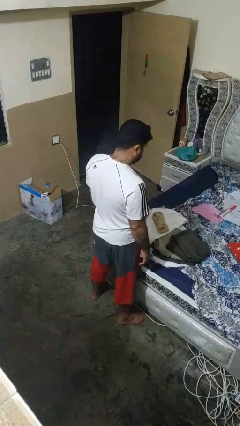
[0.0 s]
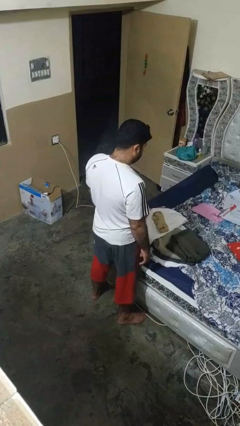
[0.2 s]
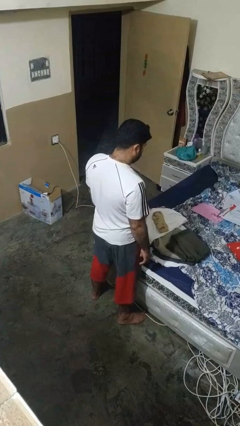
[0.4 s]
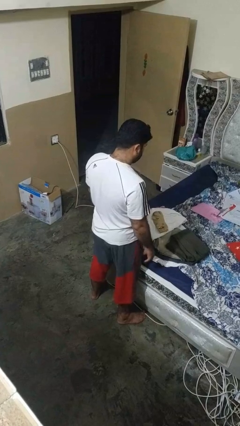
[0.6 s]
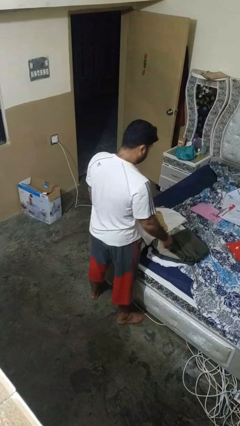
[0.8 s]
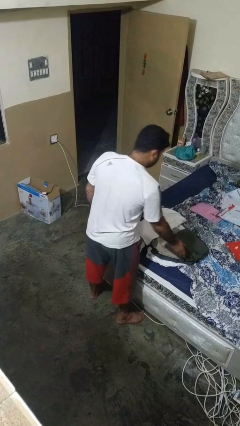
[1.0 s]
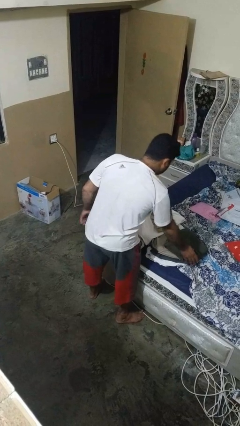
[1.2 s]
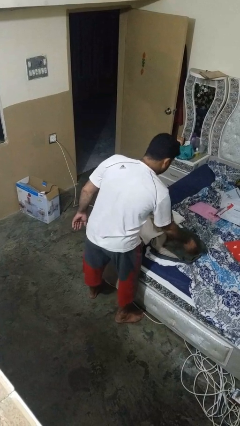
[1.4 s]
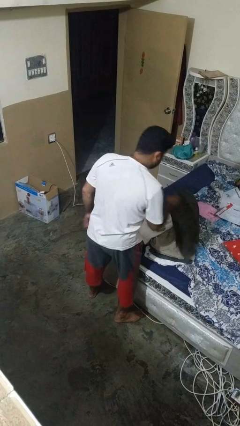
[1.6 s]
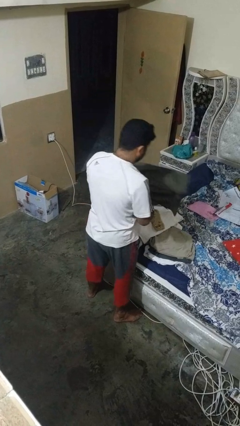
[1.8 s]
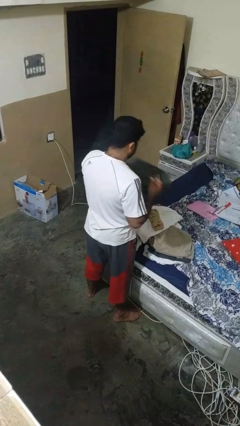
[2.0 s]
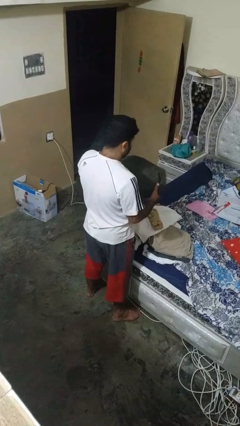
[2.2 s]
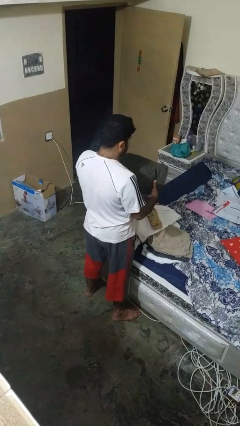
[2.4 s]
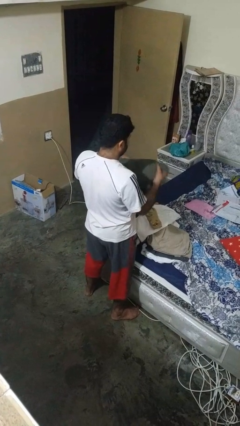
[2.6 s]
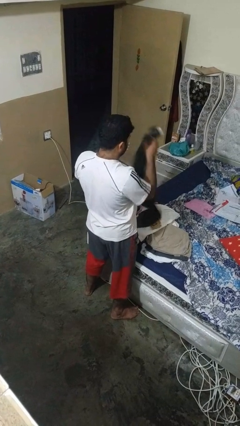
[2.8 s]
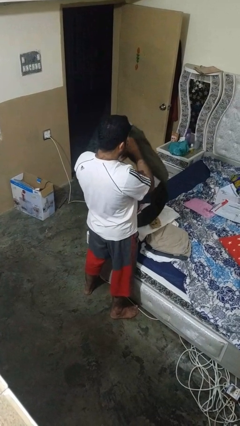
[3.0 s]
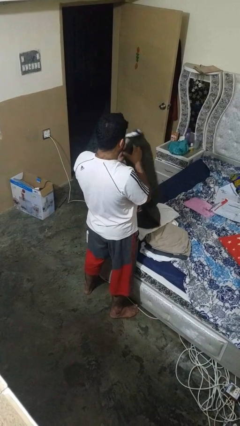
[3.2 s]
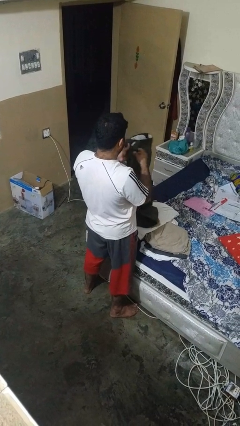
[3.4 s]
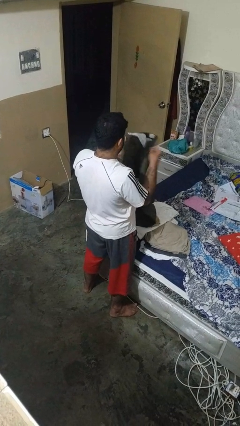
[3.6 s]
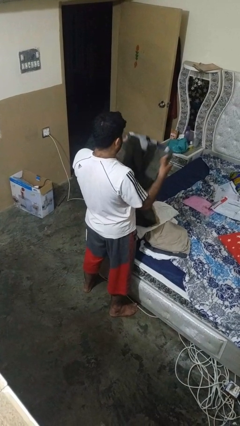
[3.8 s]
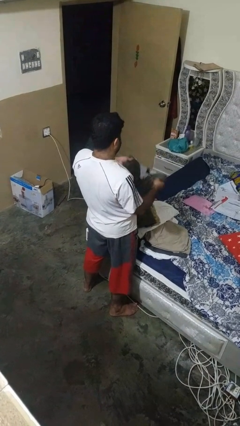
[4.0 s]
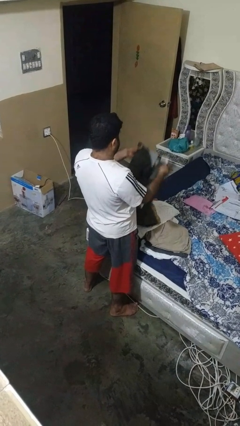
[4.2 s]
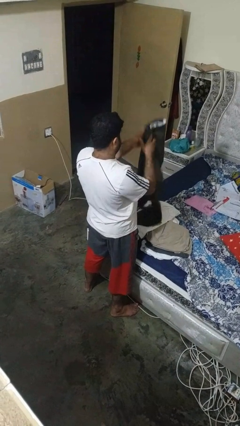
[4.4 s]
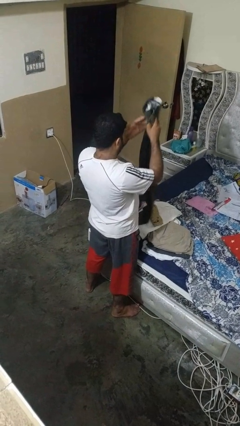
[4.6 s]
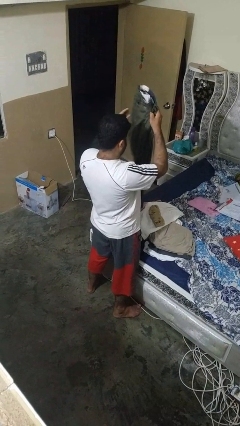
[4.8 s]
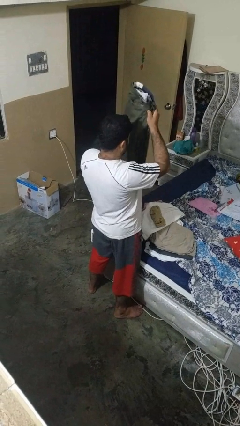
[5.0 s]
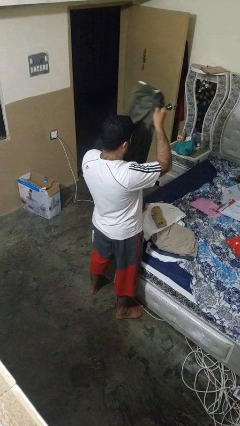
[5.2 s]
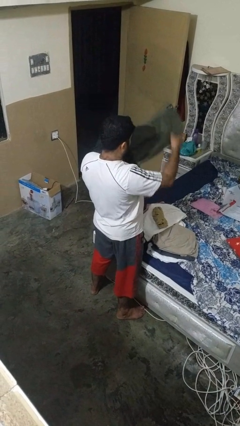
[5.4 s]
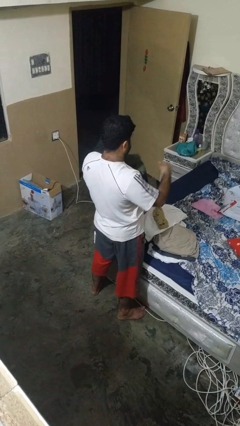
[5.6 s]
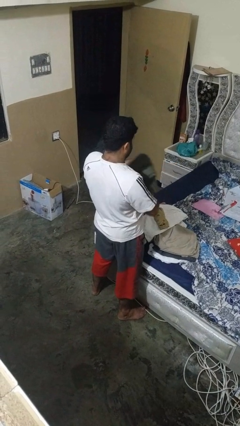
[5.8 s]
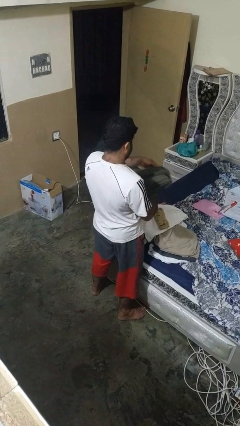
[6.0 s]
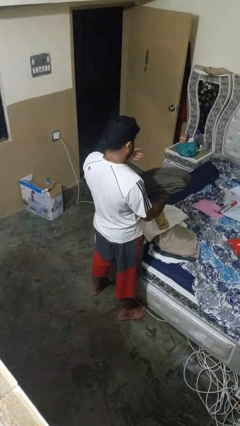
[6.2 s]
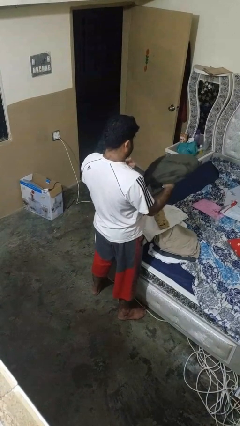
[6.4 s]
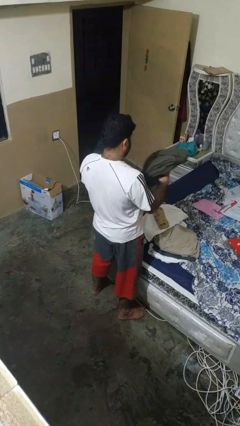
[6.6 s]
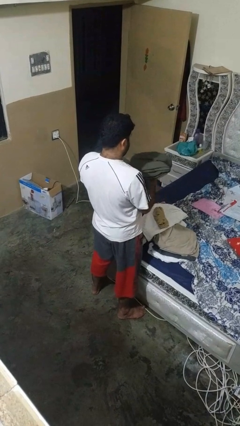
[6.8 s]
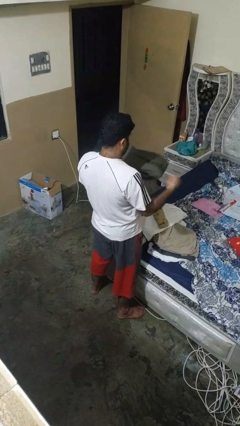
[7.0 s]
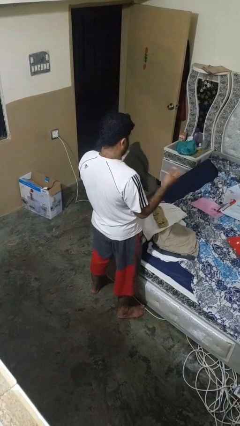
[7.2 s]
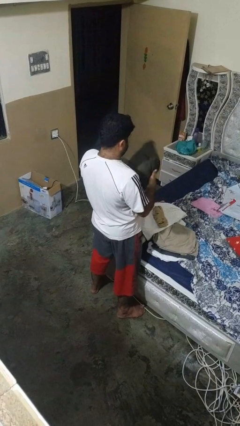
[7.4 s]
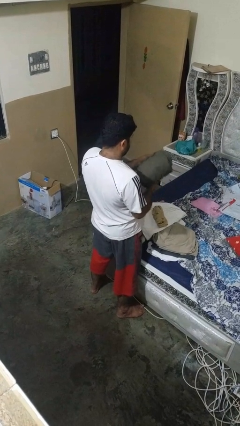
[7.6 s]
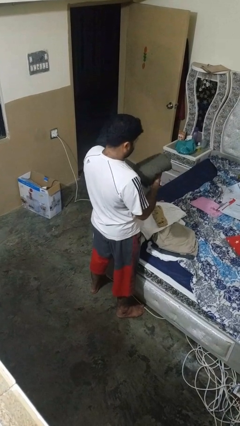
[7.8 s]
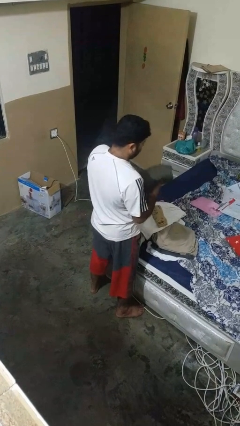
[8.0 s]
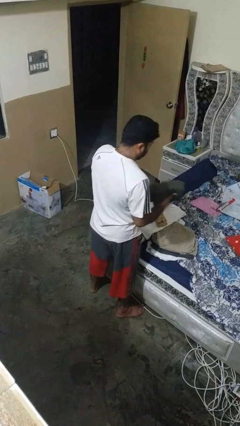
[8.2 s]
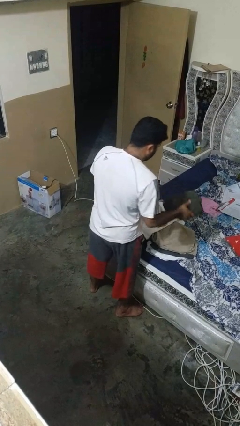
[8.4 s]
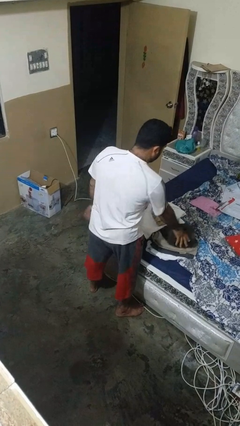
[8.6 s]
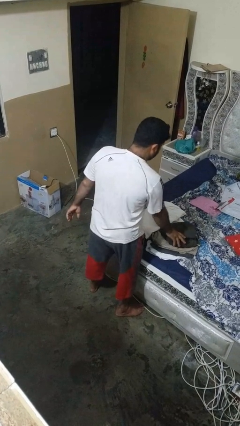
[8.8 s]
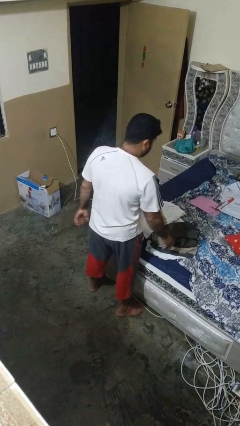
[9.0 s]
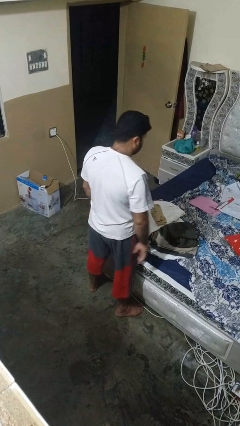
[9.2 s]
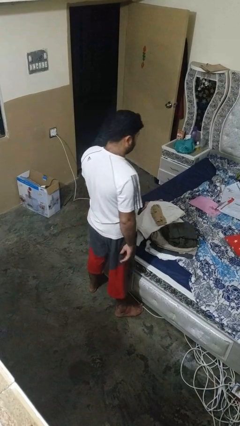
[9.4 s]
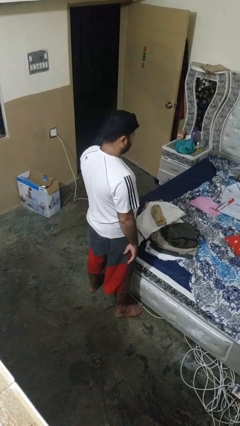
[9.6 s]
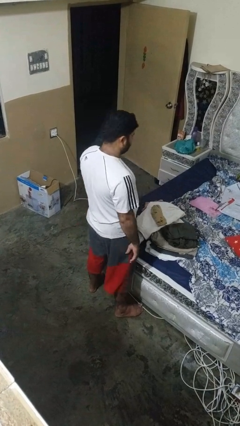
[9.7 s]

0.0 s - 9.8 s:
person folds pants

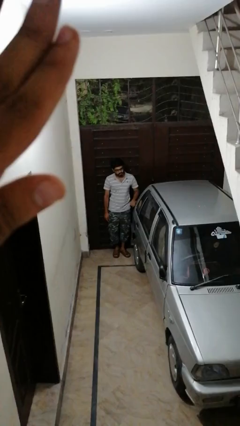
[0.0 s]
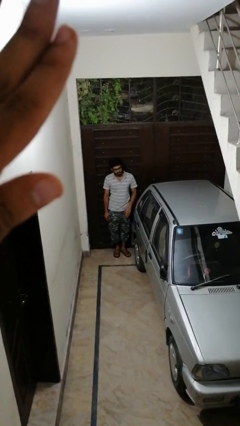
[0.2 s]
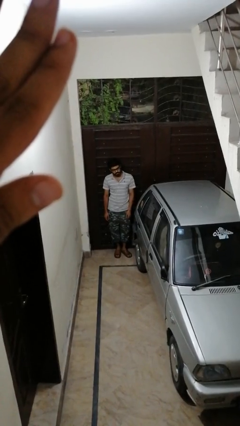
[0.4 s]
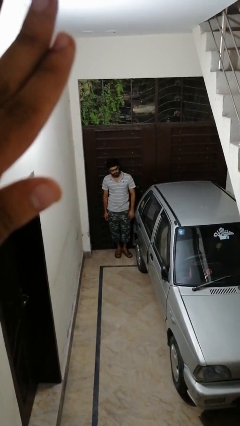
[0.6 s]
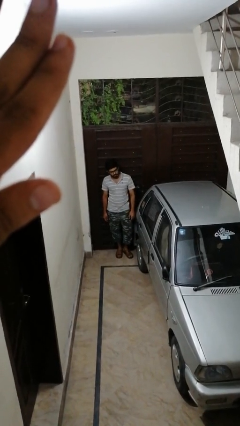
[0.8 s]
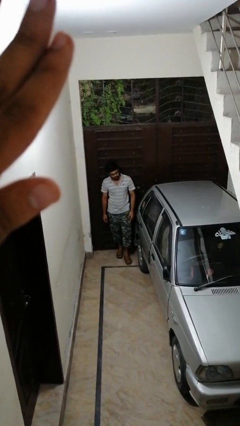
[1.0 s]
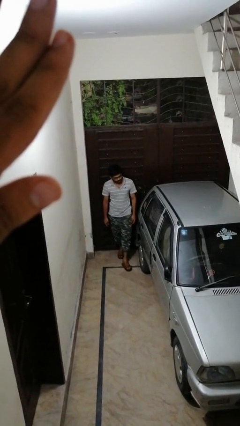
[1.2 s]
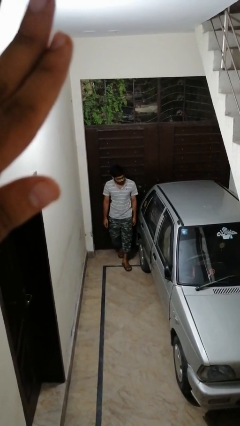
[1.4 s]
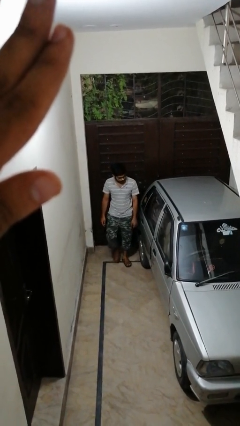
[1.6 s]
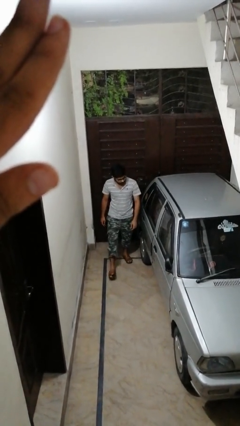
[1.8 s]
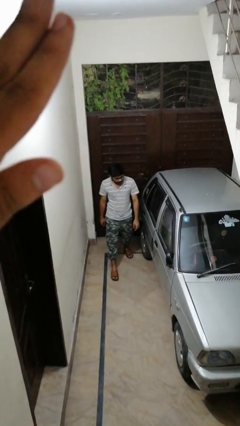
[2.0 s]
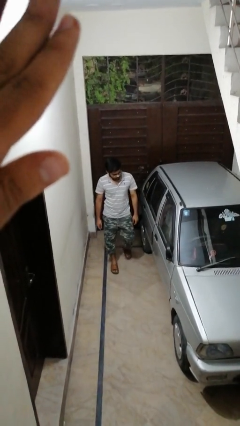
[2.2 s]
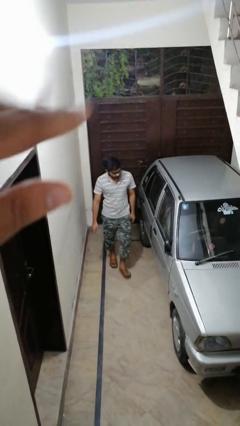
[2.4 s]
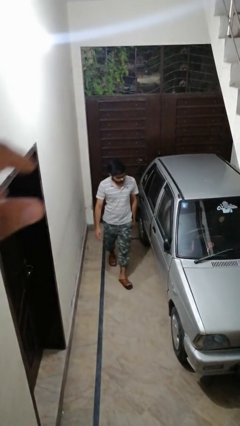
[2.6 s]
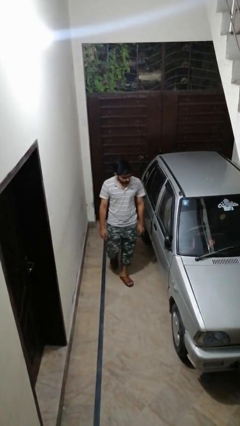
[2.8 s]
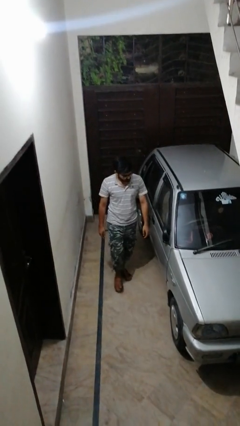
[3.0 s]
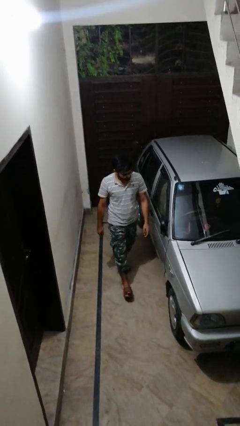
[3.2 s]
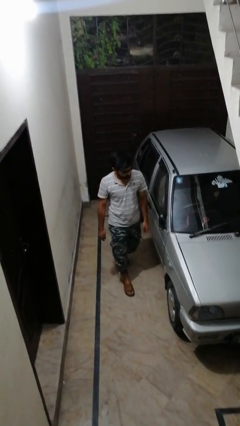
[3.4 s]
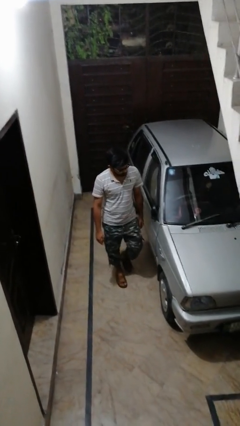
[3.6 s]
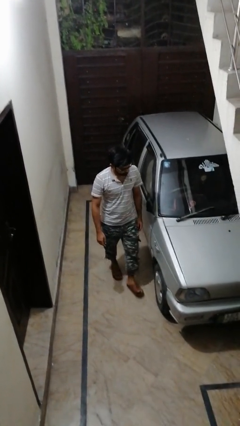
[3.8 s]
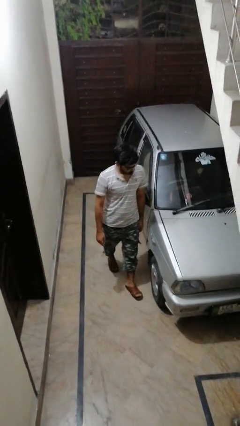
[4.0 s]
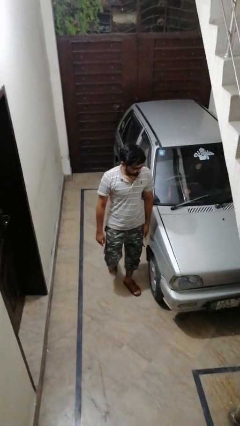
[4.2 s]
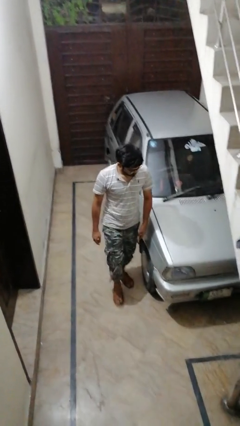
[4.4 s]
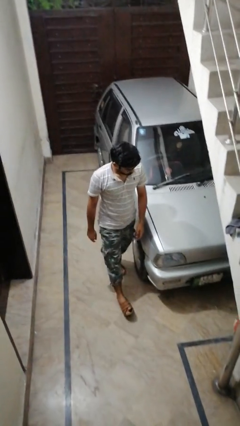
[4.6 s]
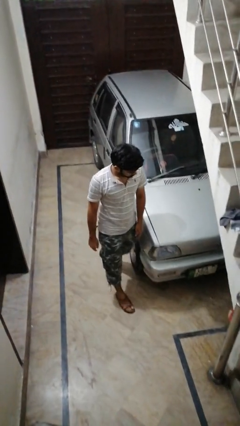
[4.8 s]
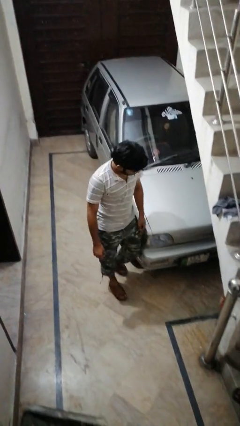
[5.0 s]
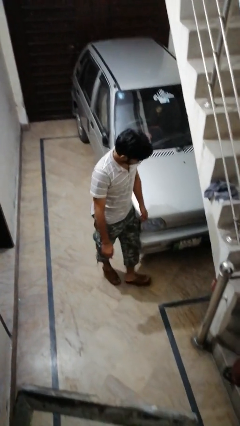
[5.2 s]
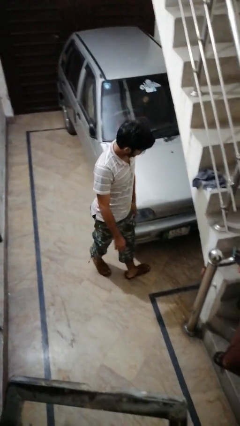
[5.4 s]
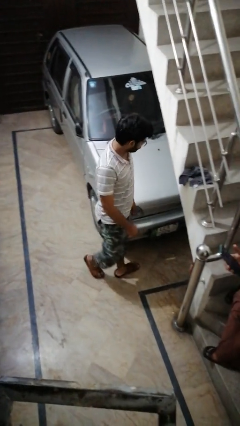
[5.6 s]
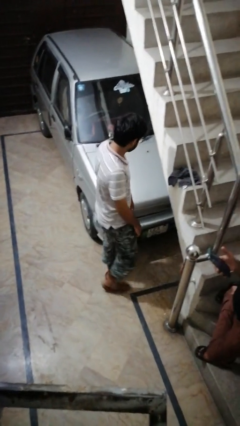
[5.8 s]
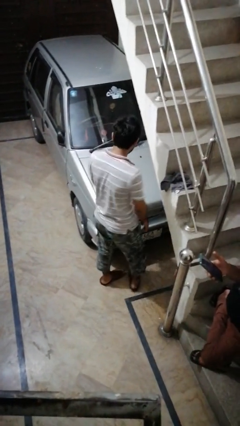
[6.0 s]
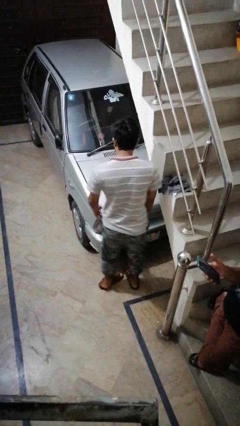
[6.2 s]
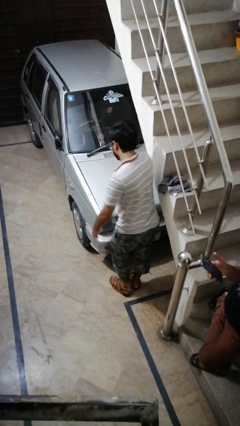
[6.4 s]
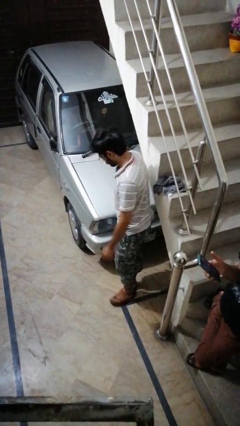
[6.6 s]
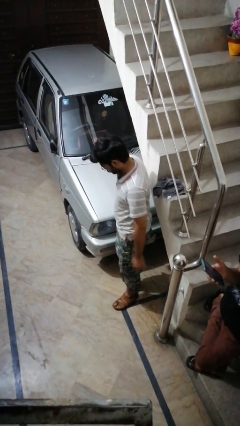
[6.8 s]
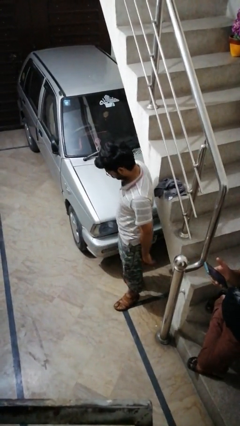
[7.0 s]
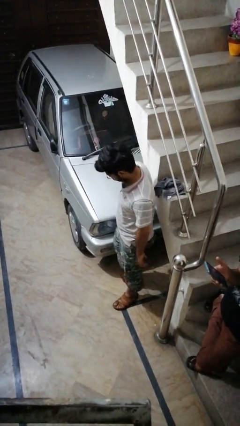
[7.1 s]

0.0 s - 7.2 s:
person walks around car

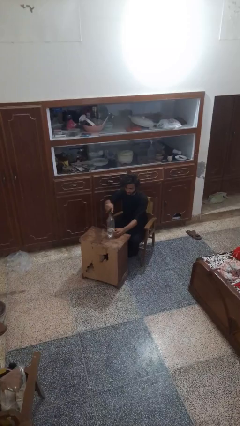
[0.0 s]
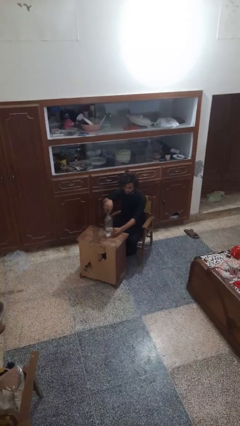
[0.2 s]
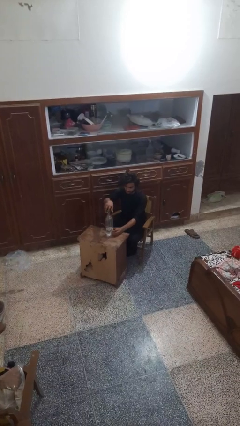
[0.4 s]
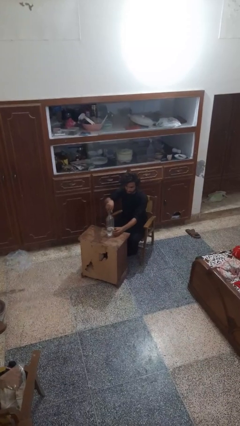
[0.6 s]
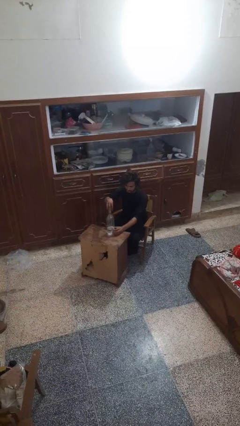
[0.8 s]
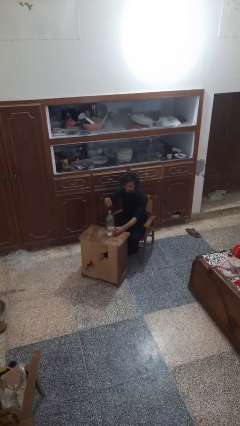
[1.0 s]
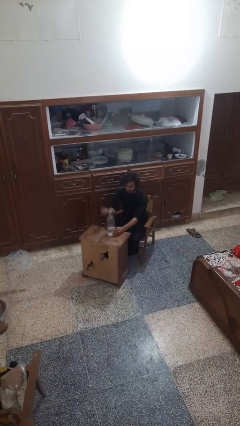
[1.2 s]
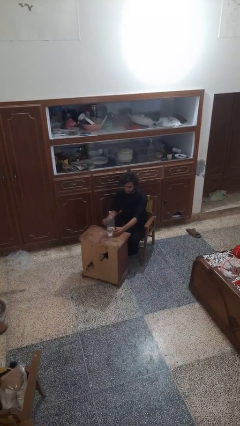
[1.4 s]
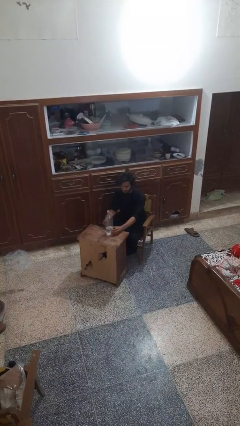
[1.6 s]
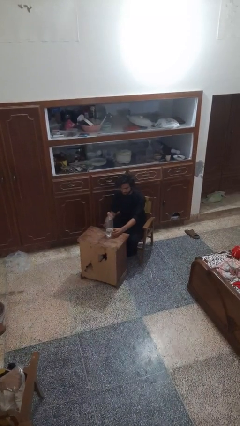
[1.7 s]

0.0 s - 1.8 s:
person unscrews lid from bottle
